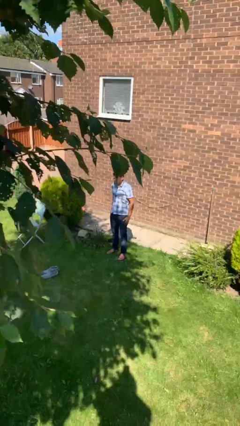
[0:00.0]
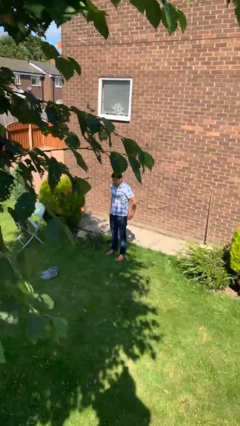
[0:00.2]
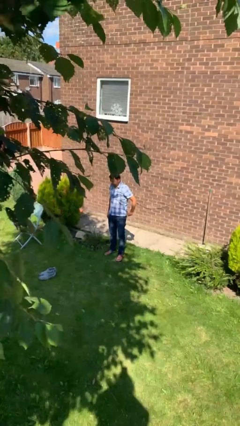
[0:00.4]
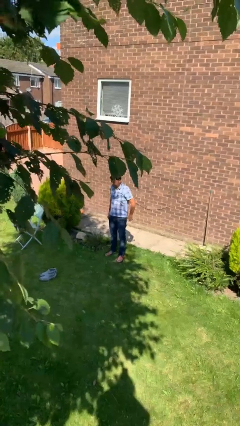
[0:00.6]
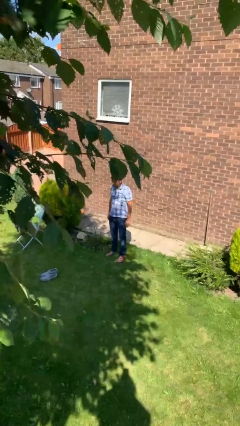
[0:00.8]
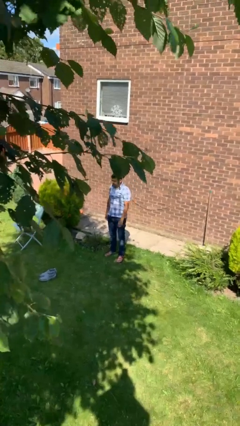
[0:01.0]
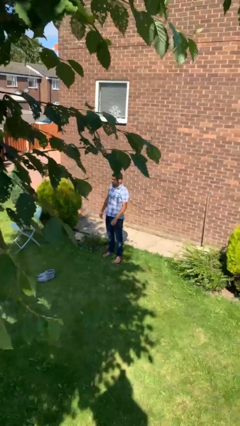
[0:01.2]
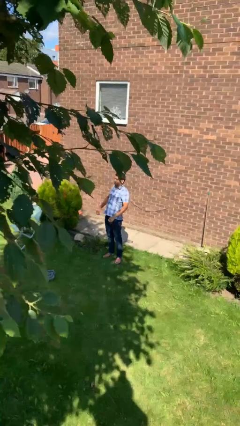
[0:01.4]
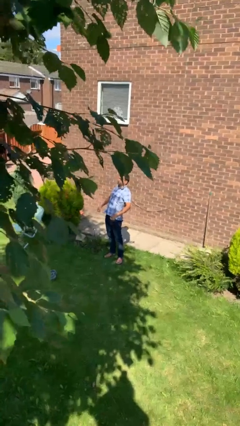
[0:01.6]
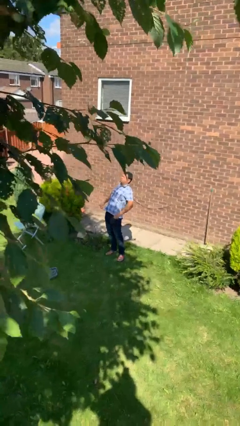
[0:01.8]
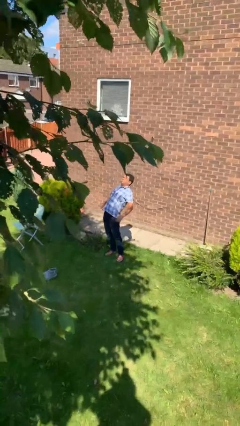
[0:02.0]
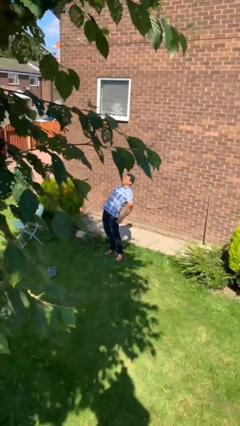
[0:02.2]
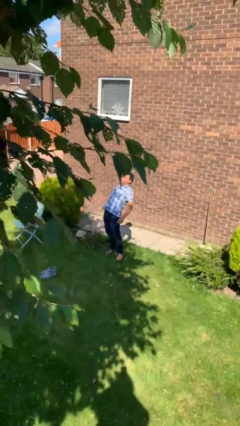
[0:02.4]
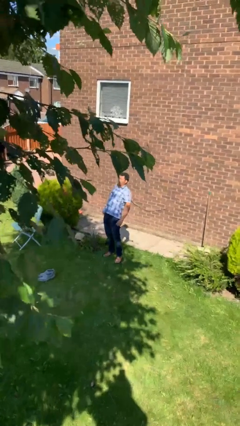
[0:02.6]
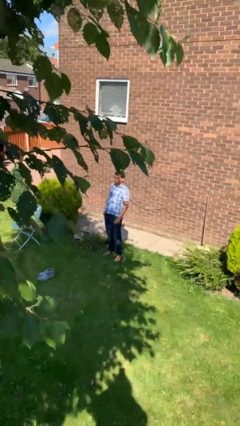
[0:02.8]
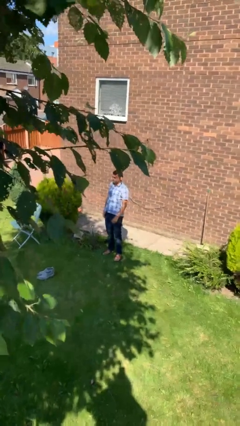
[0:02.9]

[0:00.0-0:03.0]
person stretches back

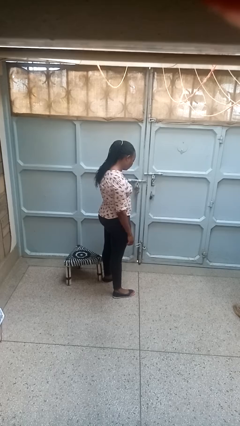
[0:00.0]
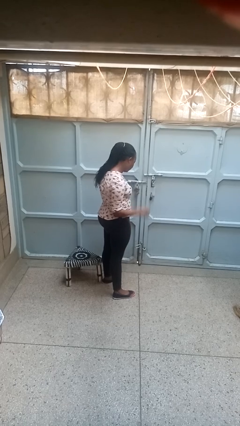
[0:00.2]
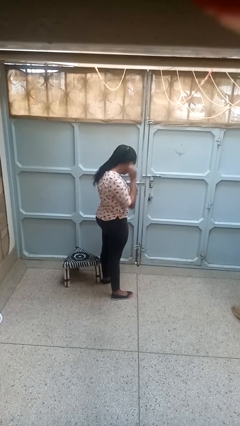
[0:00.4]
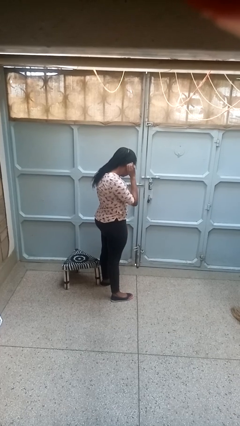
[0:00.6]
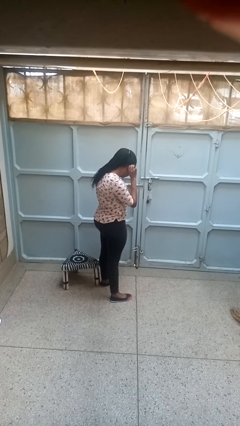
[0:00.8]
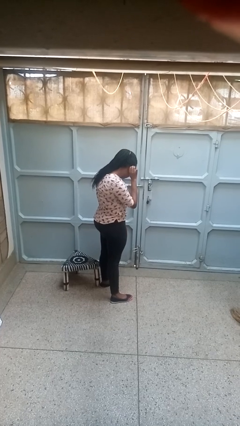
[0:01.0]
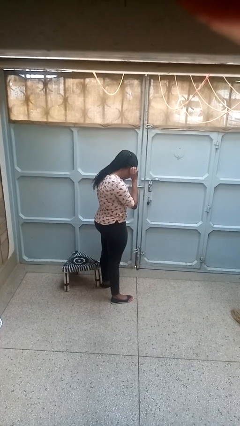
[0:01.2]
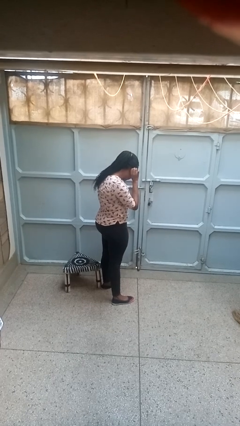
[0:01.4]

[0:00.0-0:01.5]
person gestures listen closely

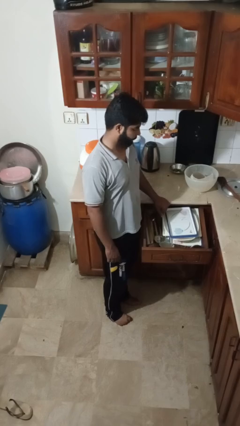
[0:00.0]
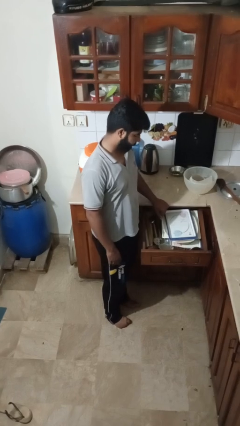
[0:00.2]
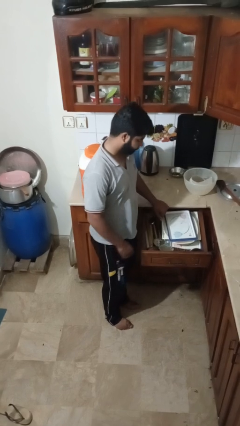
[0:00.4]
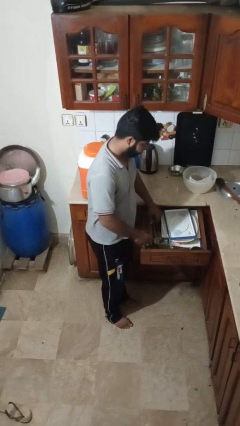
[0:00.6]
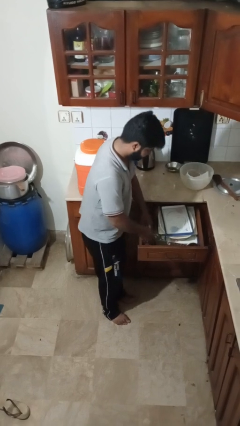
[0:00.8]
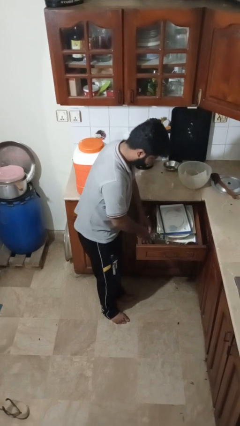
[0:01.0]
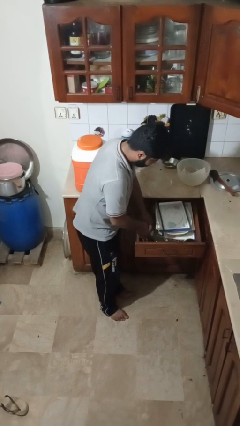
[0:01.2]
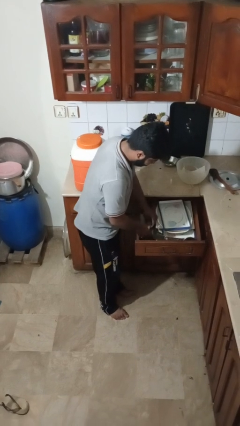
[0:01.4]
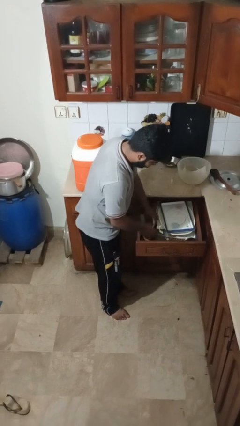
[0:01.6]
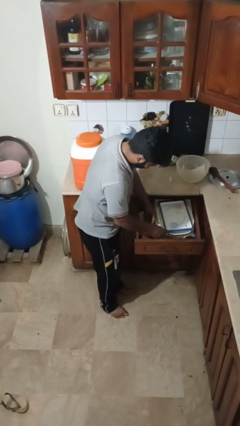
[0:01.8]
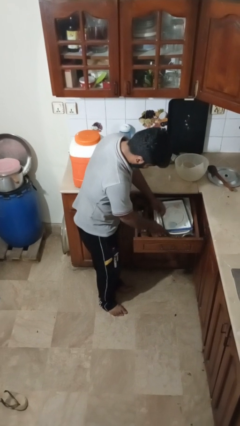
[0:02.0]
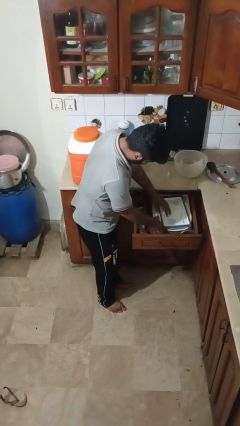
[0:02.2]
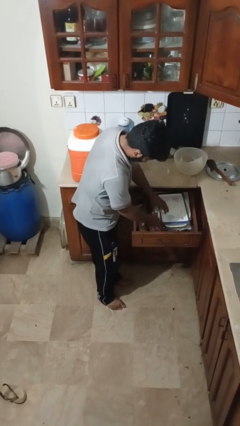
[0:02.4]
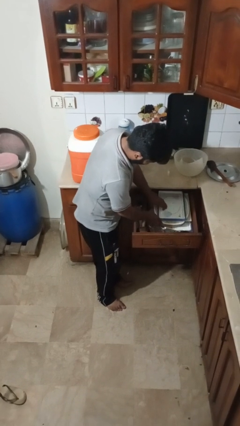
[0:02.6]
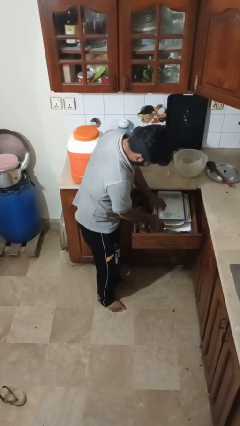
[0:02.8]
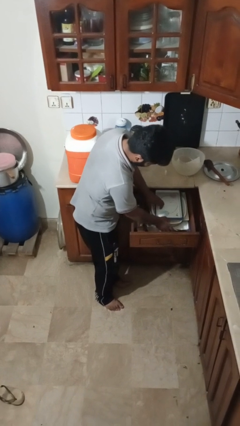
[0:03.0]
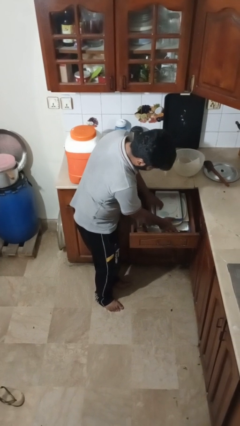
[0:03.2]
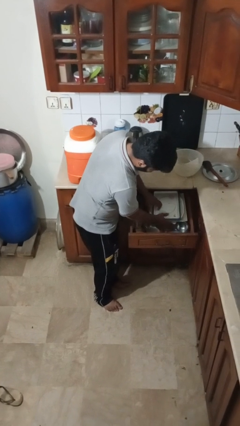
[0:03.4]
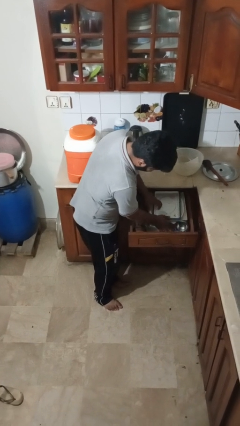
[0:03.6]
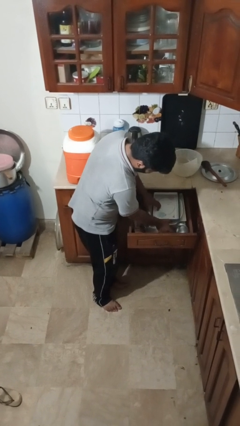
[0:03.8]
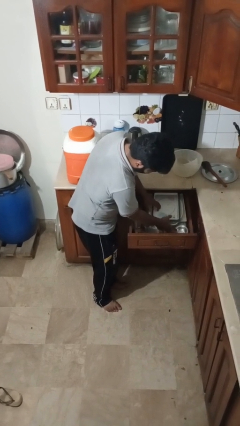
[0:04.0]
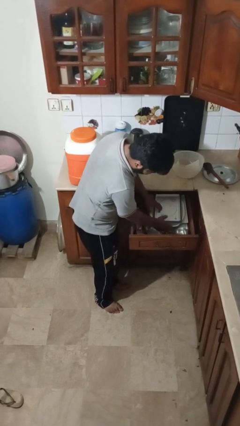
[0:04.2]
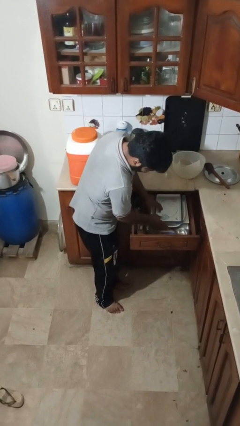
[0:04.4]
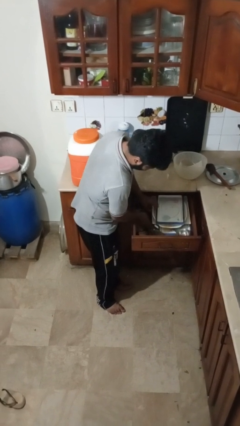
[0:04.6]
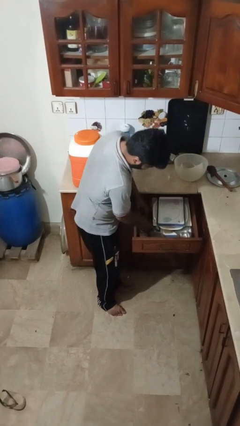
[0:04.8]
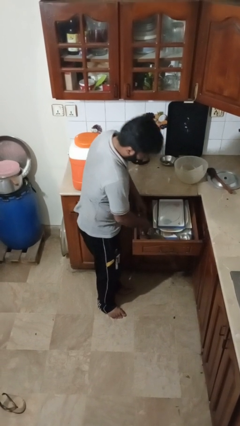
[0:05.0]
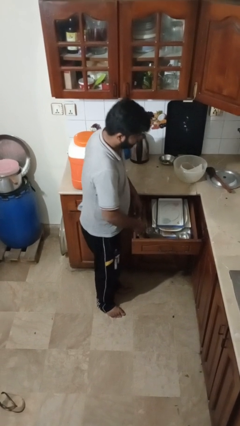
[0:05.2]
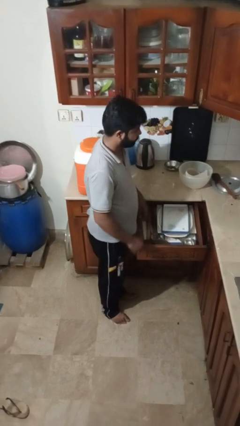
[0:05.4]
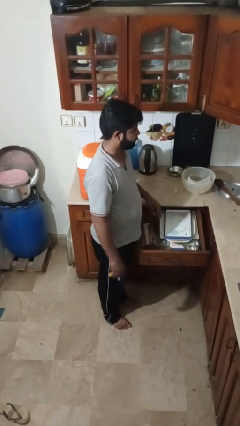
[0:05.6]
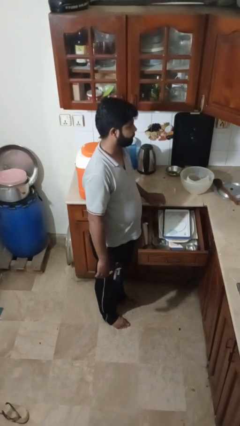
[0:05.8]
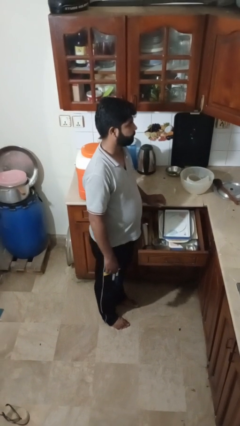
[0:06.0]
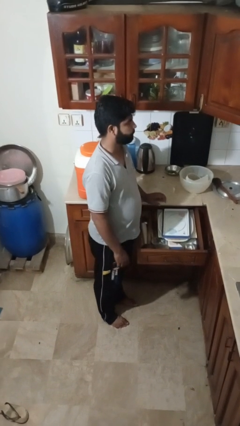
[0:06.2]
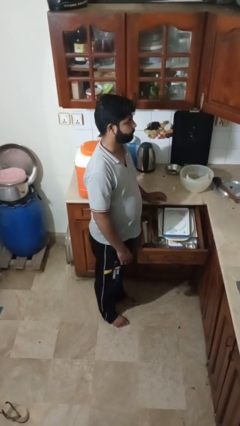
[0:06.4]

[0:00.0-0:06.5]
person searches in kitchen drawer

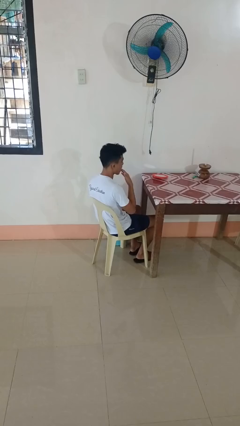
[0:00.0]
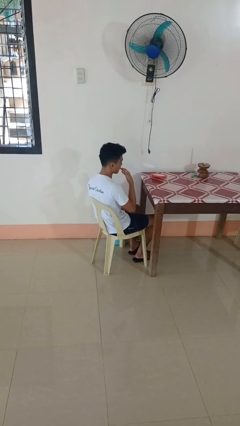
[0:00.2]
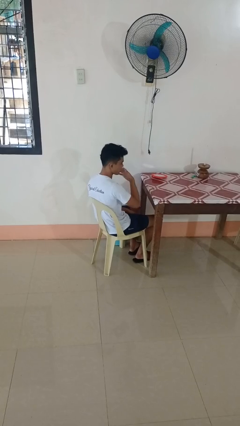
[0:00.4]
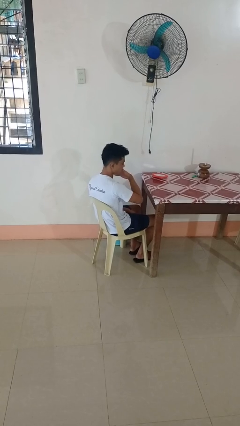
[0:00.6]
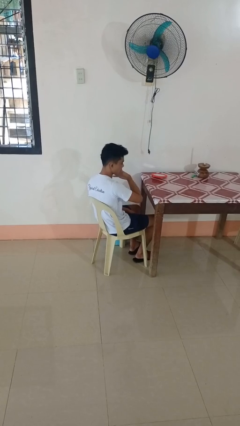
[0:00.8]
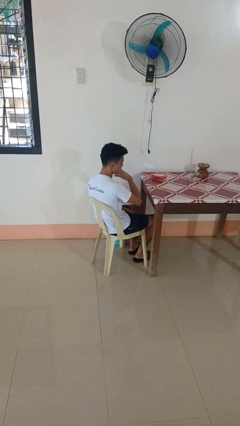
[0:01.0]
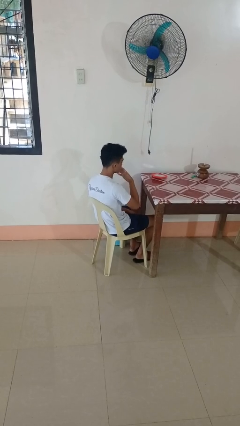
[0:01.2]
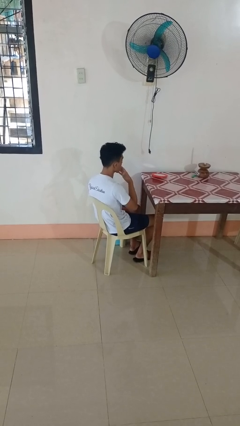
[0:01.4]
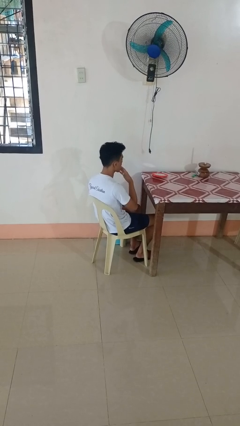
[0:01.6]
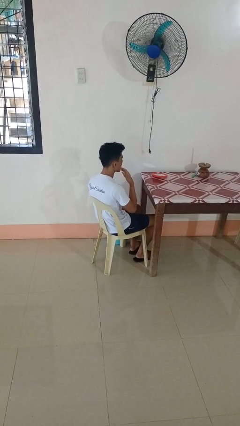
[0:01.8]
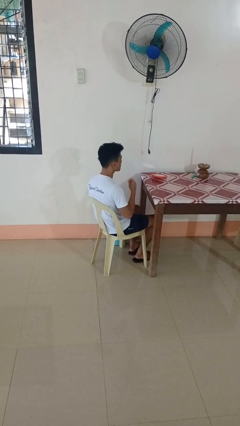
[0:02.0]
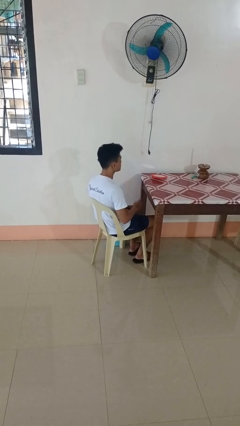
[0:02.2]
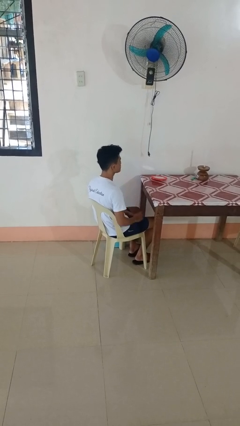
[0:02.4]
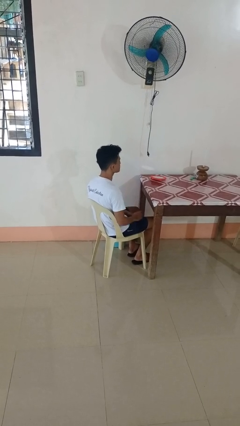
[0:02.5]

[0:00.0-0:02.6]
person licks fingers

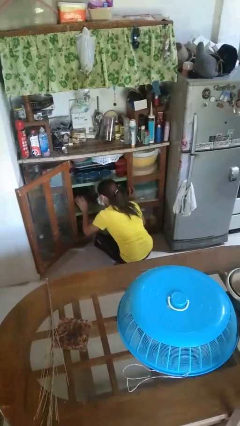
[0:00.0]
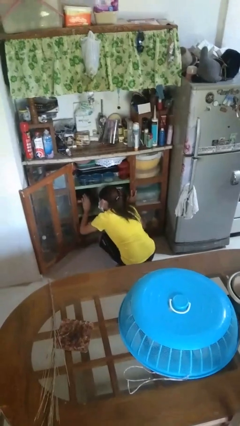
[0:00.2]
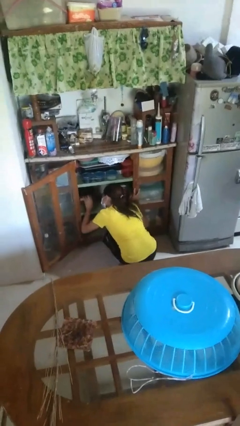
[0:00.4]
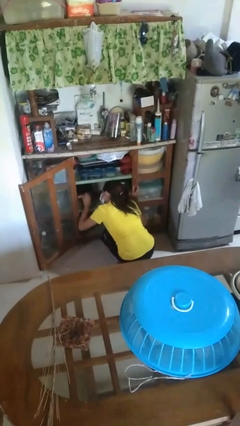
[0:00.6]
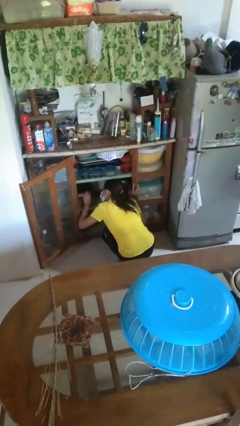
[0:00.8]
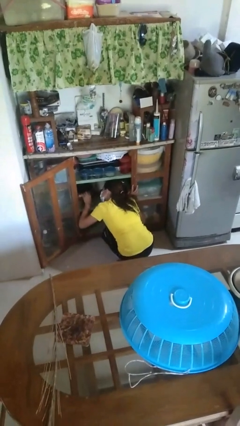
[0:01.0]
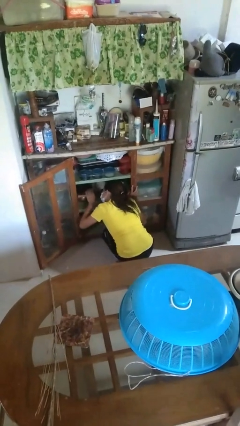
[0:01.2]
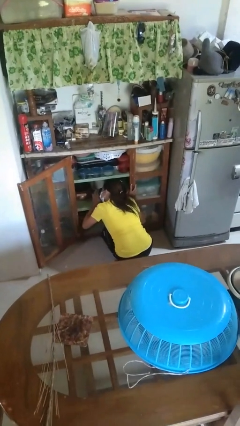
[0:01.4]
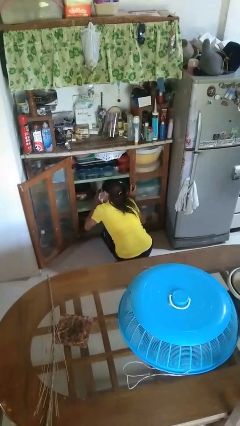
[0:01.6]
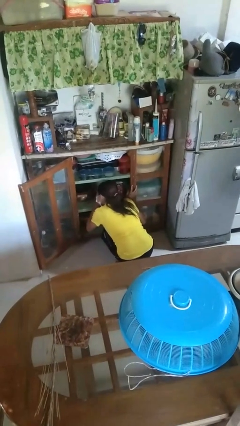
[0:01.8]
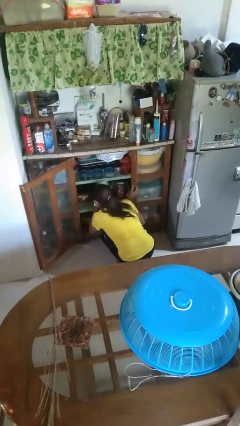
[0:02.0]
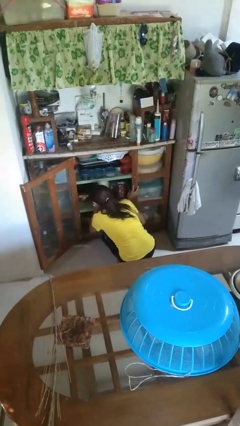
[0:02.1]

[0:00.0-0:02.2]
person searches in cabinet

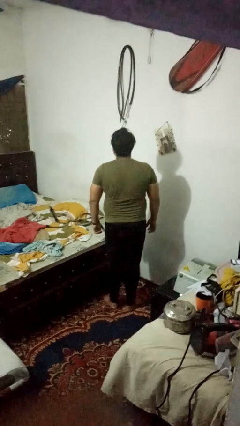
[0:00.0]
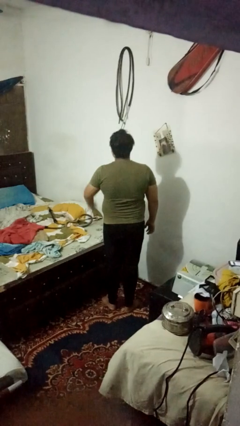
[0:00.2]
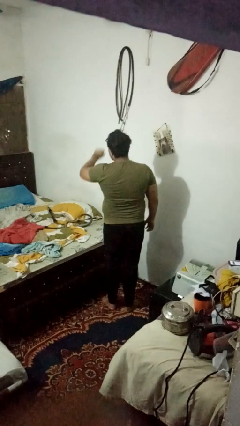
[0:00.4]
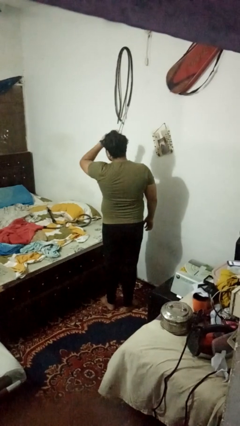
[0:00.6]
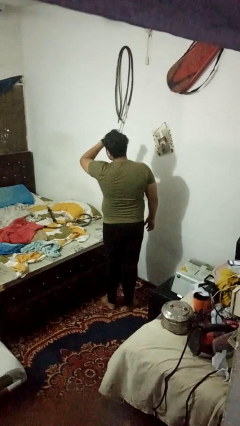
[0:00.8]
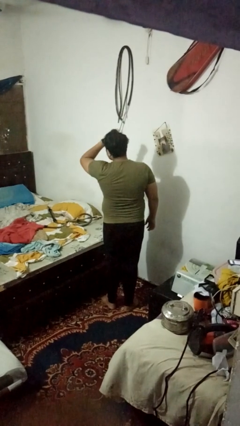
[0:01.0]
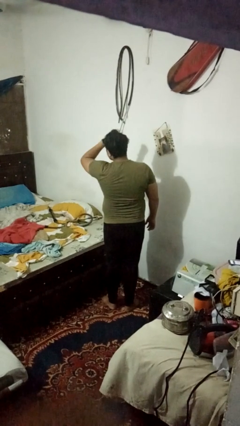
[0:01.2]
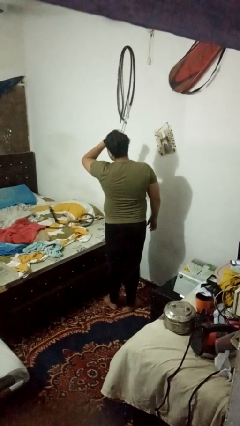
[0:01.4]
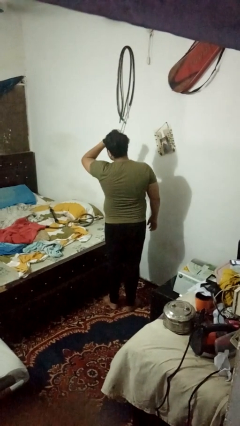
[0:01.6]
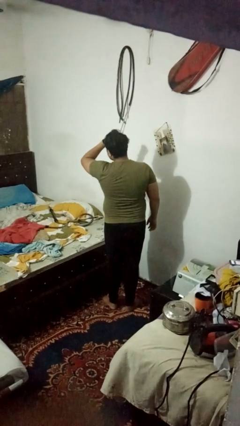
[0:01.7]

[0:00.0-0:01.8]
person gestures watch closely
